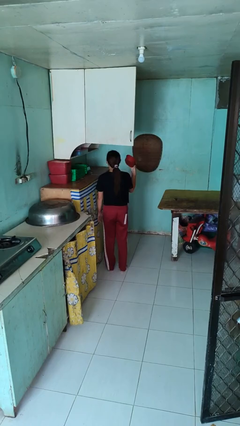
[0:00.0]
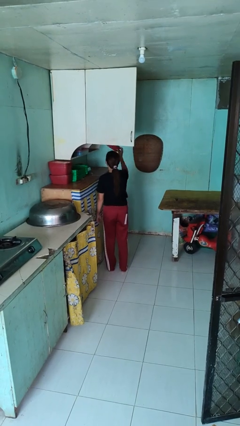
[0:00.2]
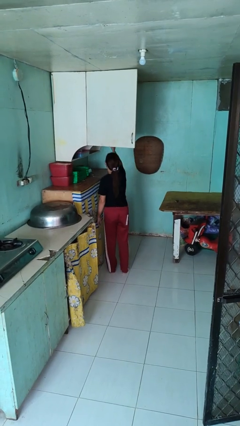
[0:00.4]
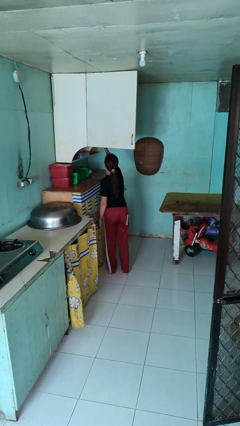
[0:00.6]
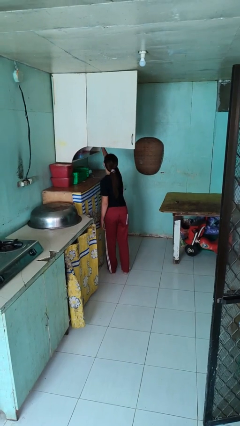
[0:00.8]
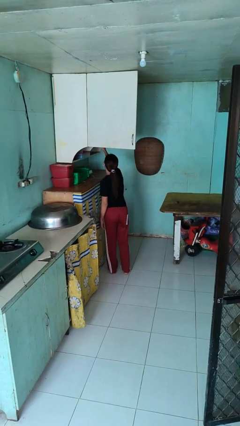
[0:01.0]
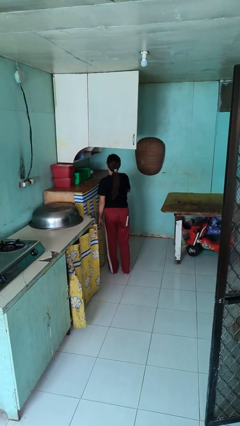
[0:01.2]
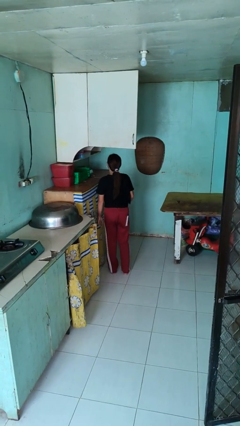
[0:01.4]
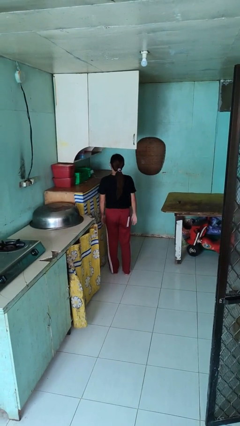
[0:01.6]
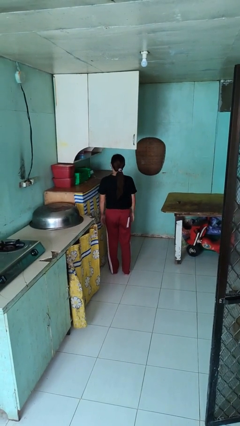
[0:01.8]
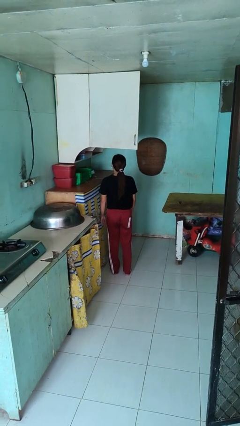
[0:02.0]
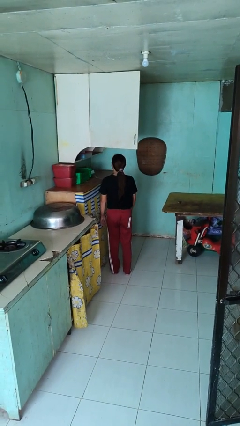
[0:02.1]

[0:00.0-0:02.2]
person puts object in cabinet

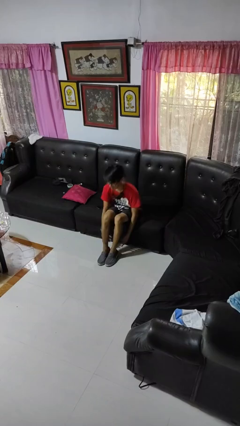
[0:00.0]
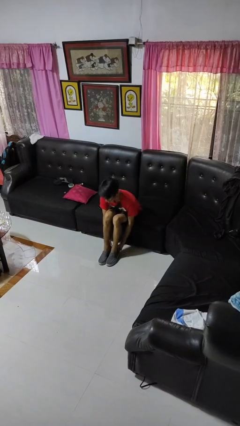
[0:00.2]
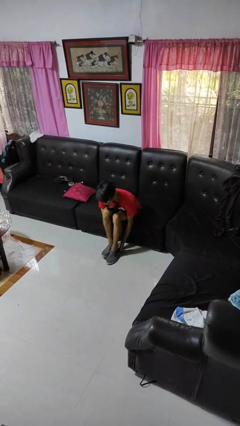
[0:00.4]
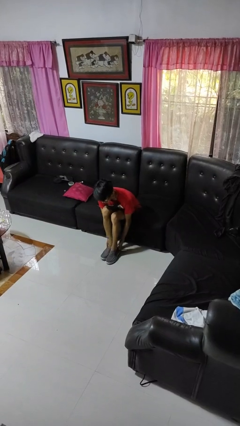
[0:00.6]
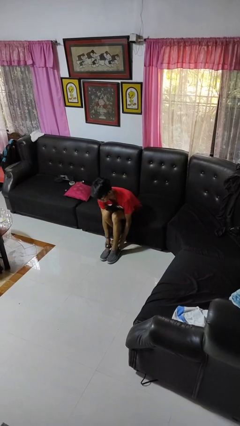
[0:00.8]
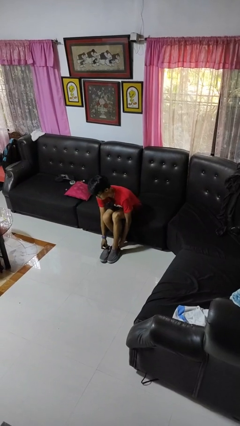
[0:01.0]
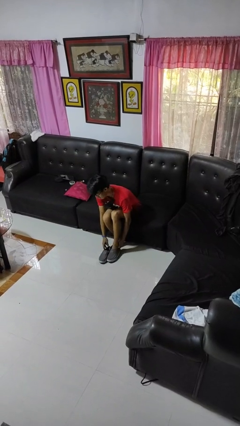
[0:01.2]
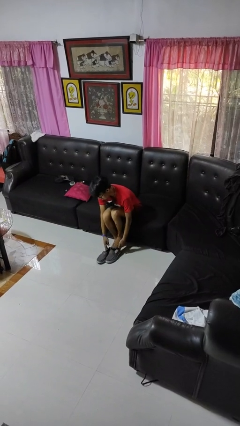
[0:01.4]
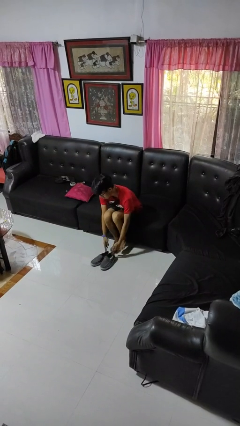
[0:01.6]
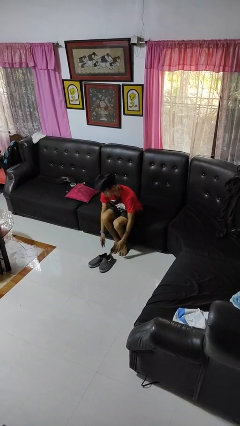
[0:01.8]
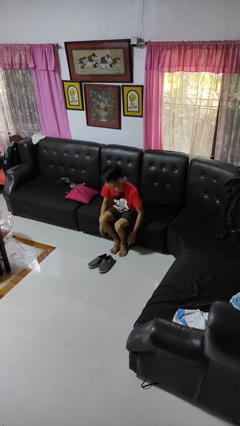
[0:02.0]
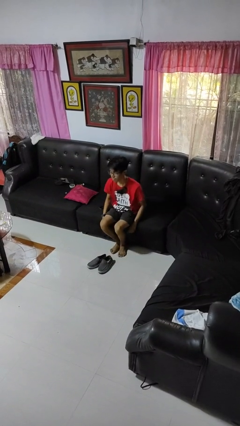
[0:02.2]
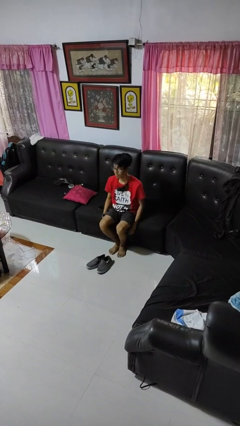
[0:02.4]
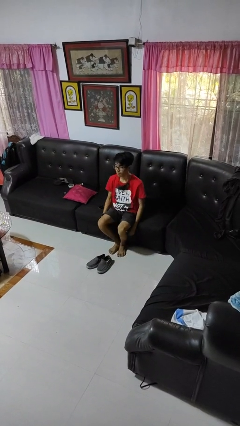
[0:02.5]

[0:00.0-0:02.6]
person takes off shoes

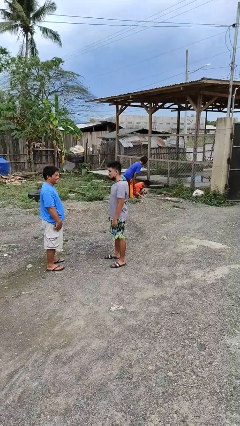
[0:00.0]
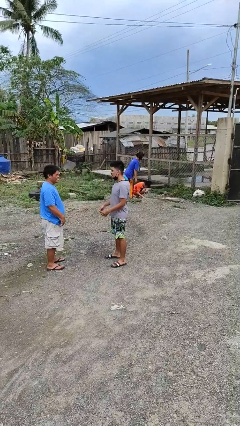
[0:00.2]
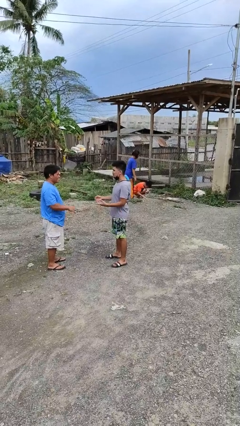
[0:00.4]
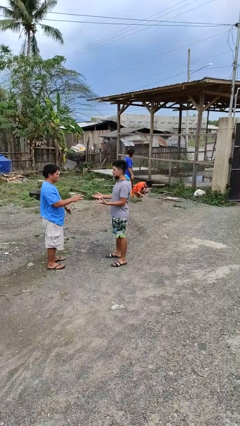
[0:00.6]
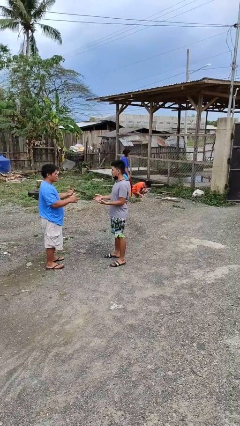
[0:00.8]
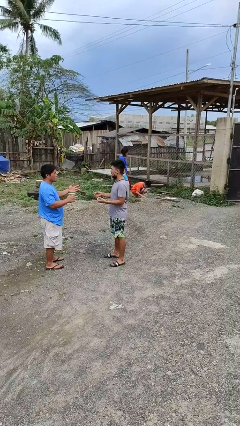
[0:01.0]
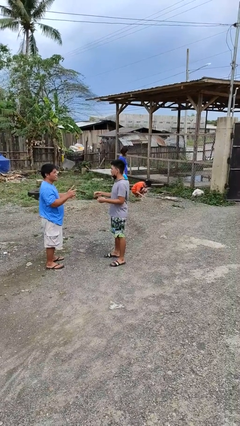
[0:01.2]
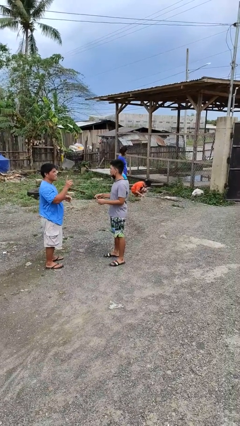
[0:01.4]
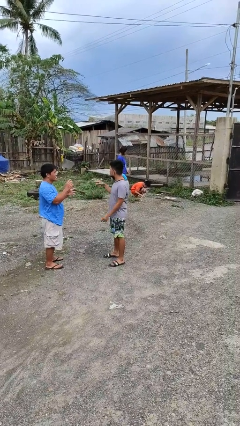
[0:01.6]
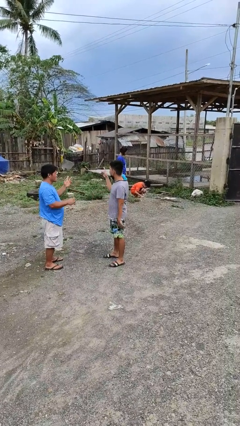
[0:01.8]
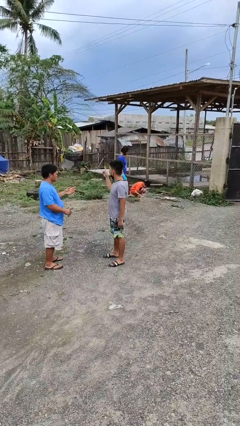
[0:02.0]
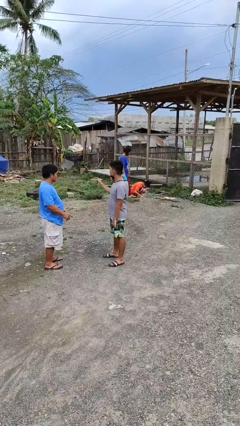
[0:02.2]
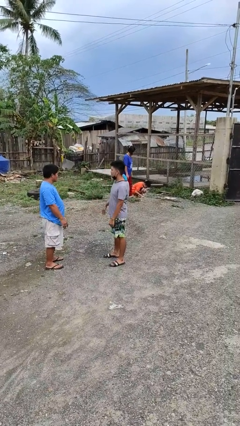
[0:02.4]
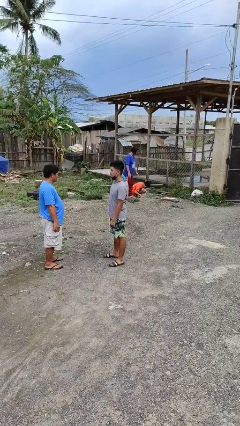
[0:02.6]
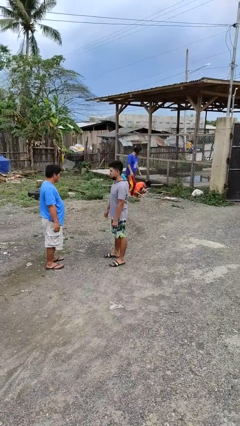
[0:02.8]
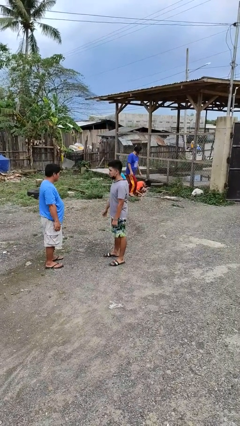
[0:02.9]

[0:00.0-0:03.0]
person talks to person

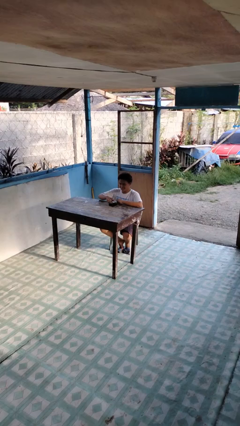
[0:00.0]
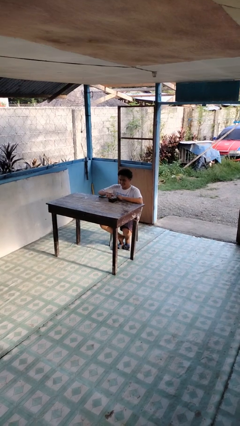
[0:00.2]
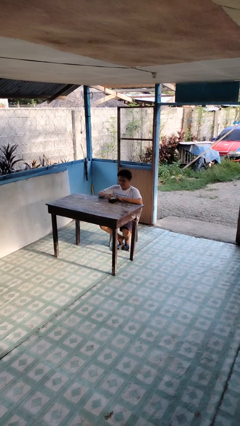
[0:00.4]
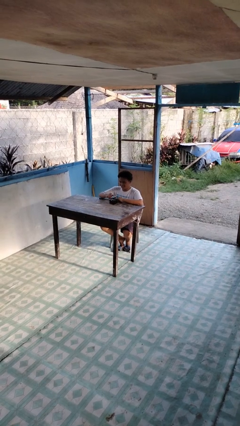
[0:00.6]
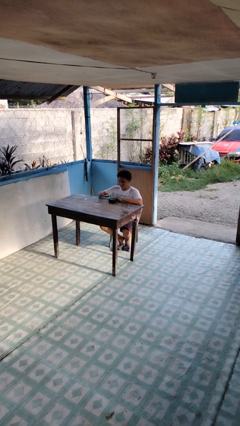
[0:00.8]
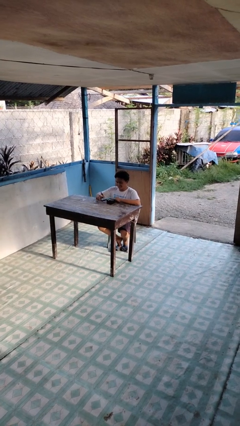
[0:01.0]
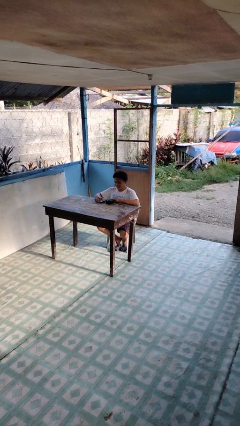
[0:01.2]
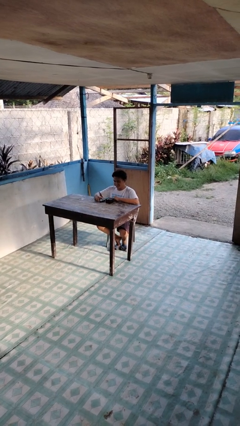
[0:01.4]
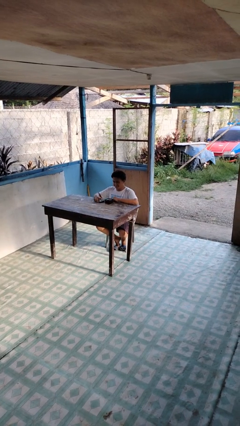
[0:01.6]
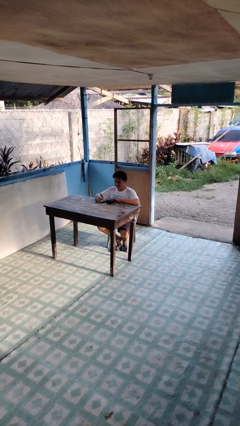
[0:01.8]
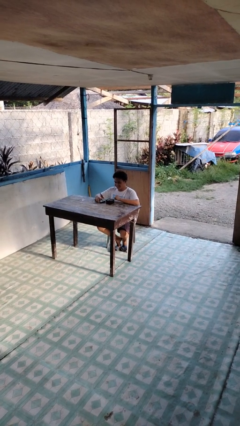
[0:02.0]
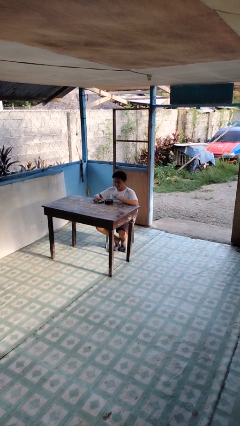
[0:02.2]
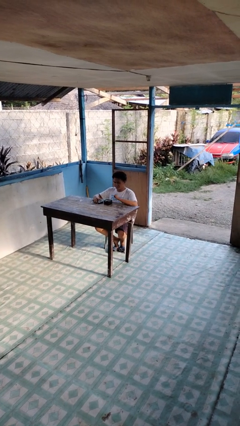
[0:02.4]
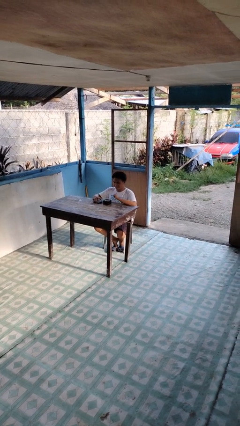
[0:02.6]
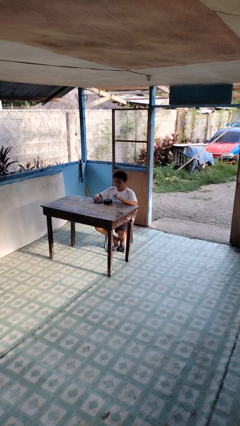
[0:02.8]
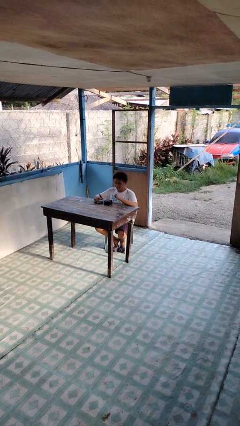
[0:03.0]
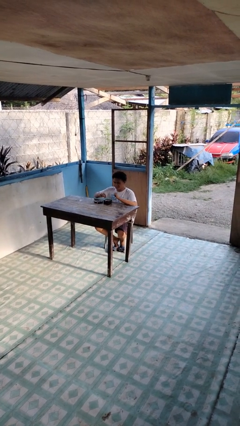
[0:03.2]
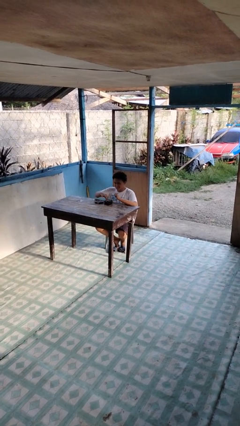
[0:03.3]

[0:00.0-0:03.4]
person opens jewelry box

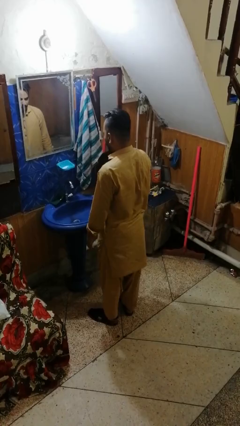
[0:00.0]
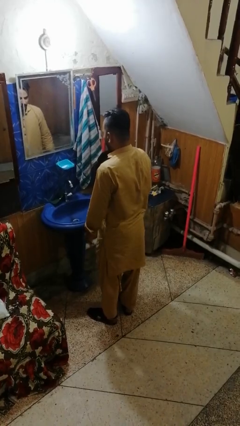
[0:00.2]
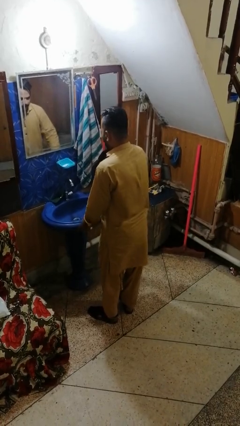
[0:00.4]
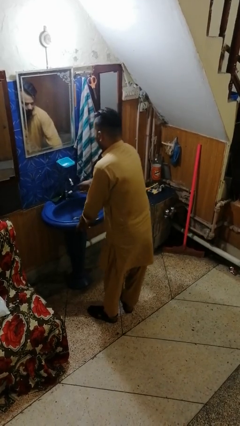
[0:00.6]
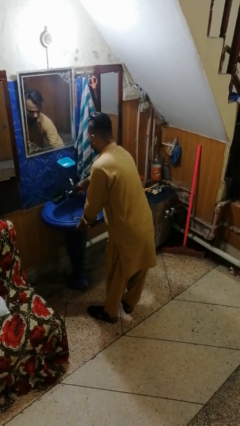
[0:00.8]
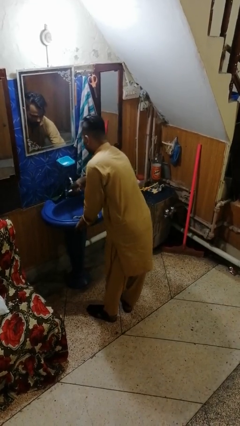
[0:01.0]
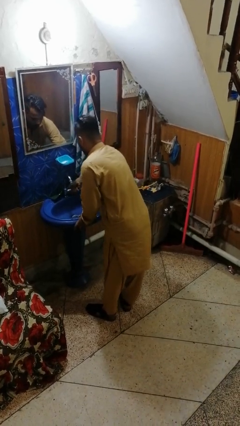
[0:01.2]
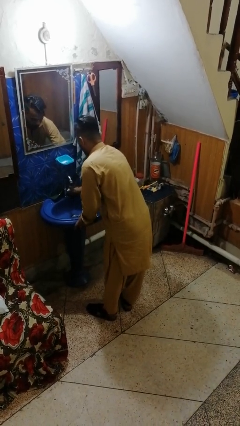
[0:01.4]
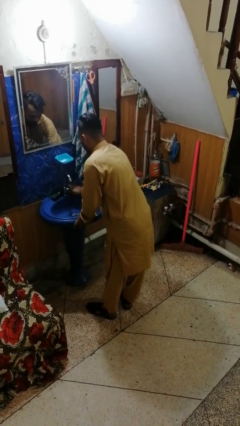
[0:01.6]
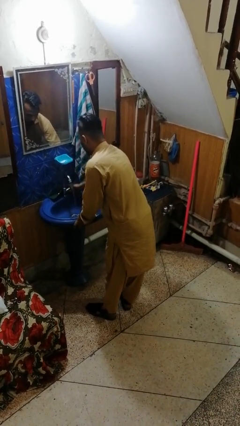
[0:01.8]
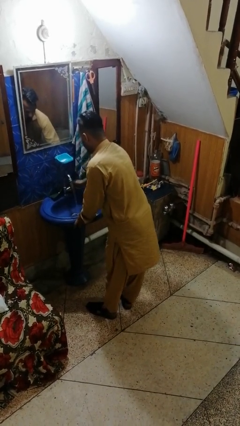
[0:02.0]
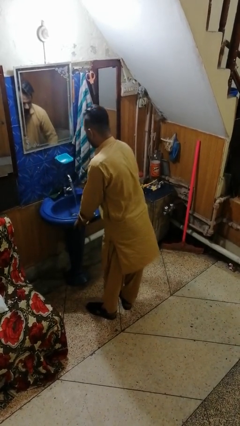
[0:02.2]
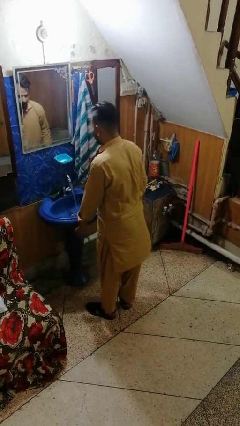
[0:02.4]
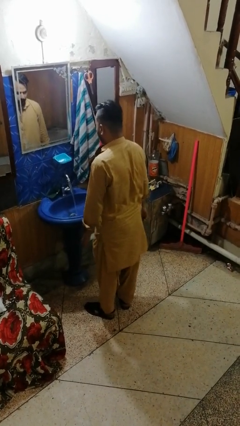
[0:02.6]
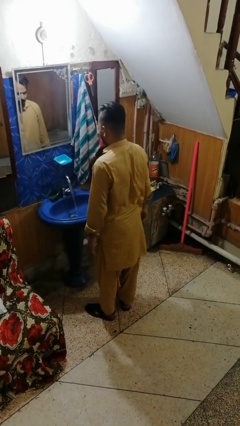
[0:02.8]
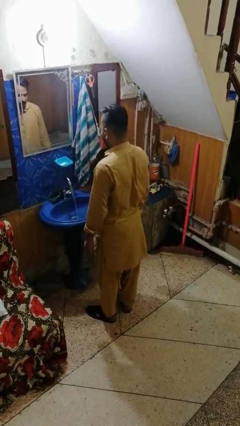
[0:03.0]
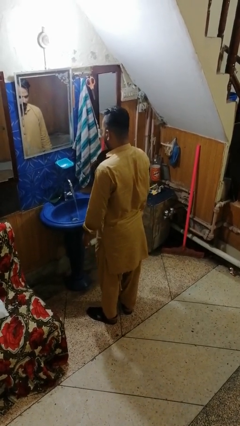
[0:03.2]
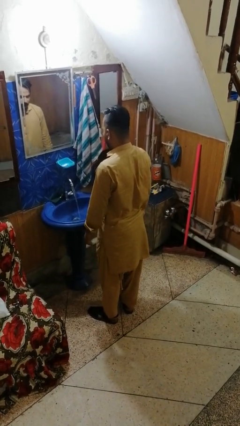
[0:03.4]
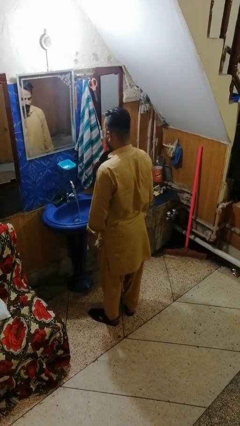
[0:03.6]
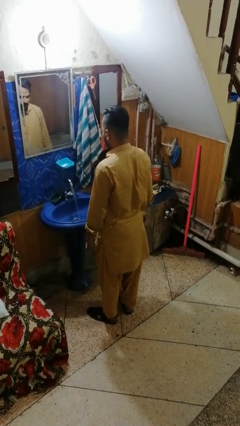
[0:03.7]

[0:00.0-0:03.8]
person turns on faucet

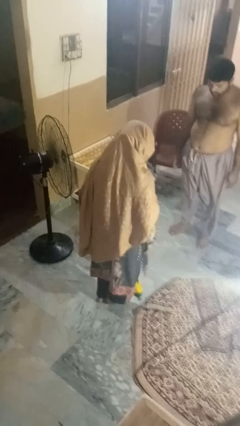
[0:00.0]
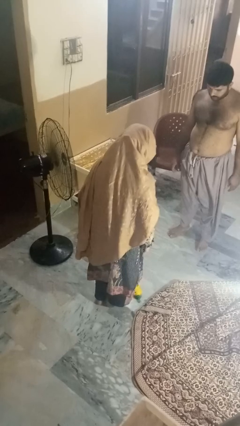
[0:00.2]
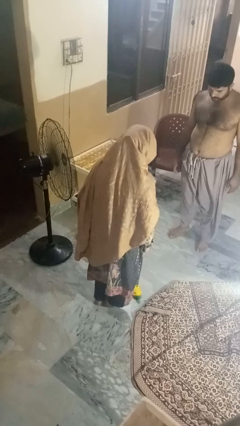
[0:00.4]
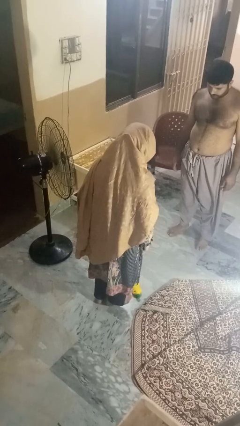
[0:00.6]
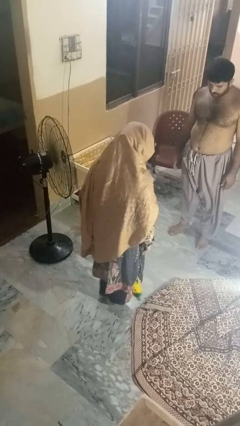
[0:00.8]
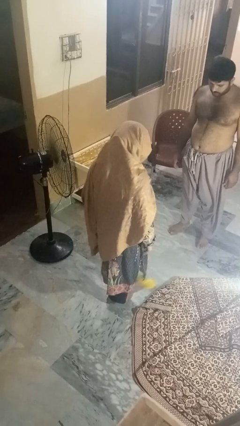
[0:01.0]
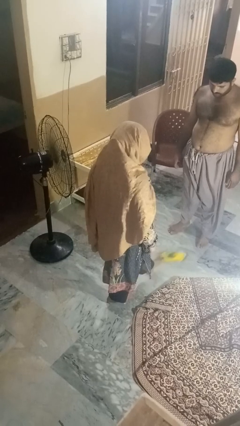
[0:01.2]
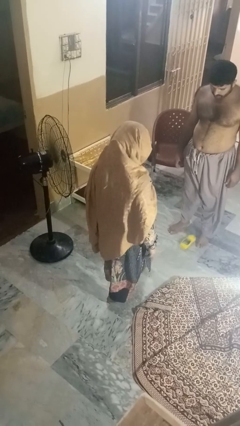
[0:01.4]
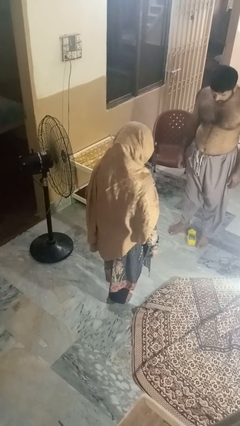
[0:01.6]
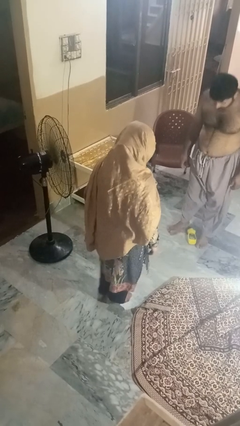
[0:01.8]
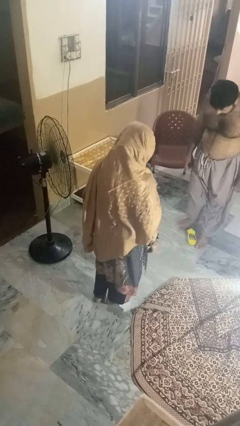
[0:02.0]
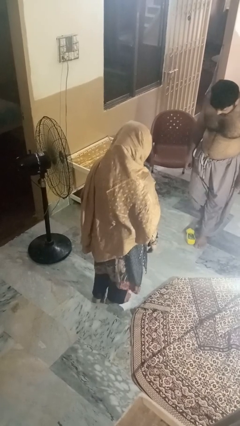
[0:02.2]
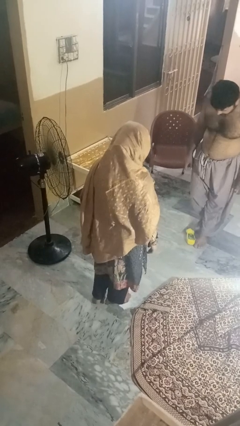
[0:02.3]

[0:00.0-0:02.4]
person kicks object to person

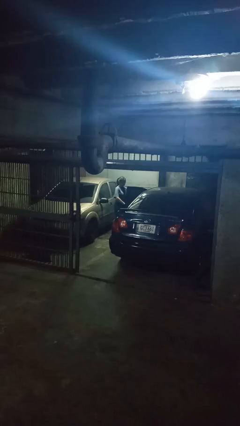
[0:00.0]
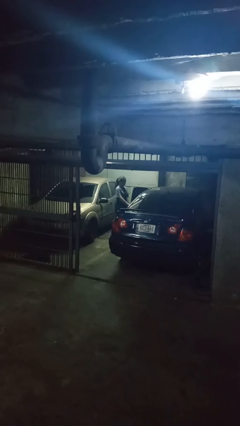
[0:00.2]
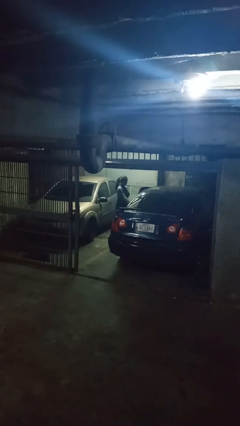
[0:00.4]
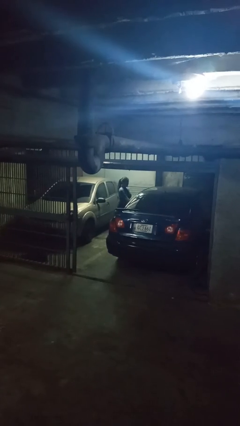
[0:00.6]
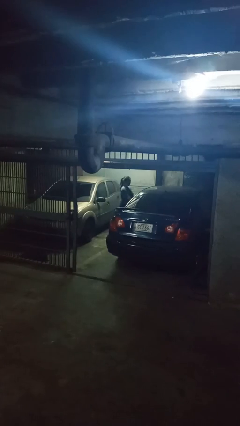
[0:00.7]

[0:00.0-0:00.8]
person closes car door
